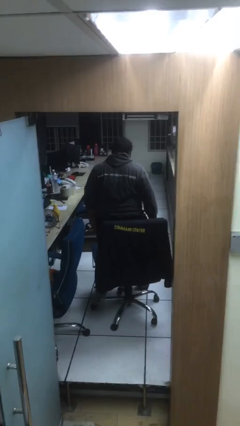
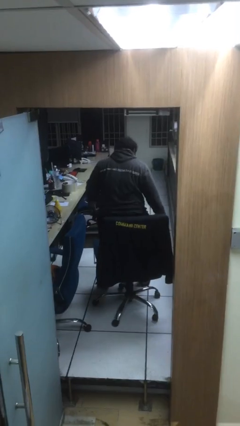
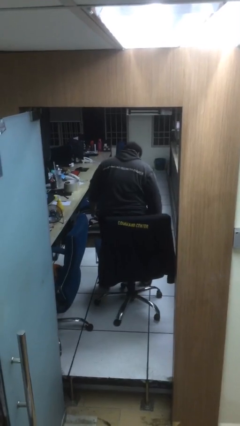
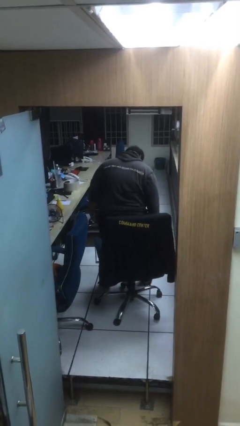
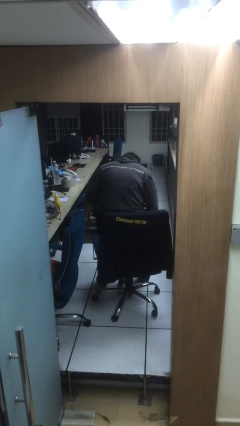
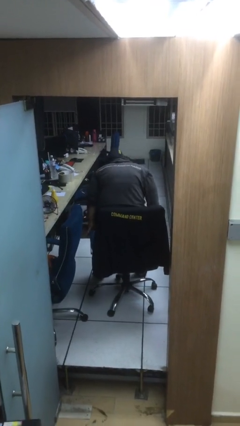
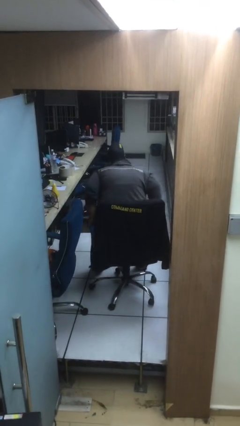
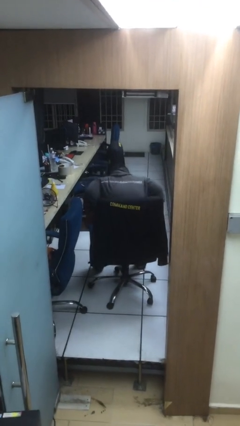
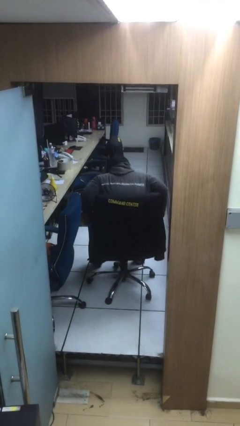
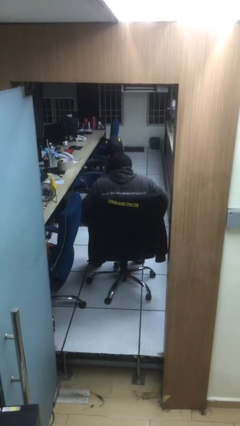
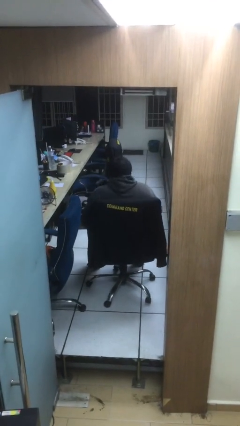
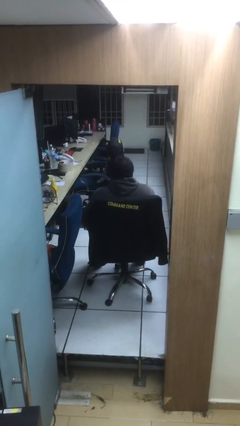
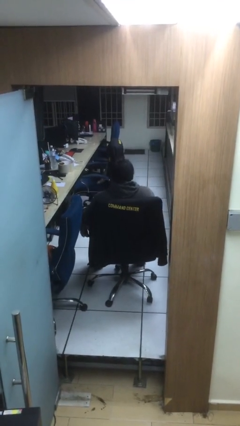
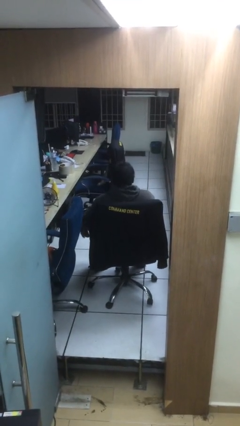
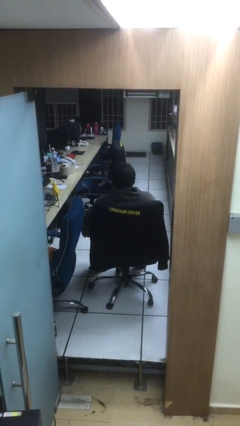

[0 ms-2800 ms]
person sits down

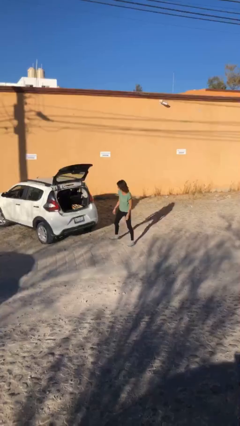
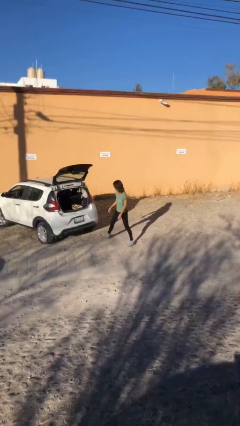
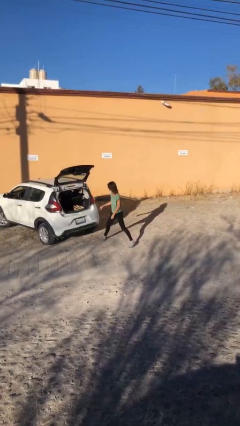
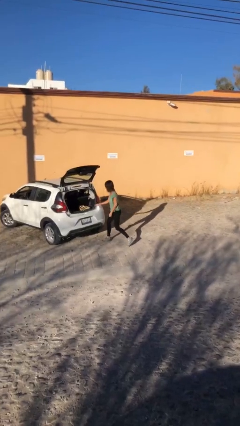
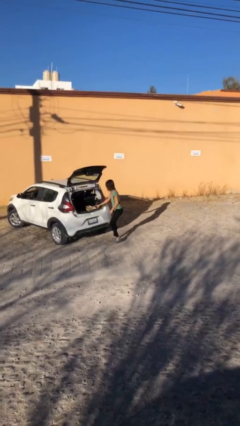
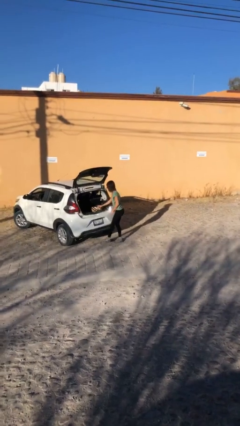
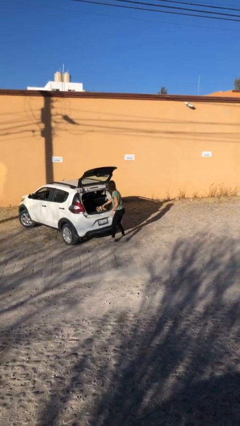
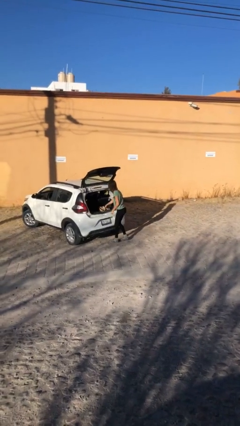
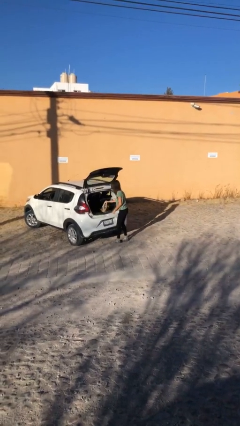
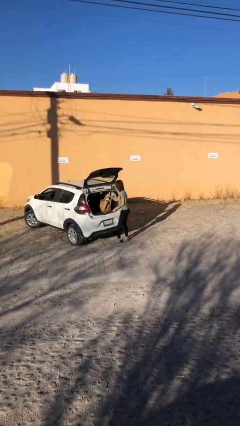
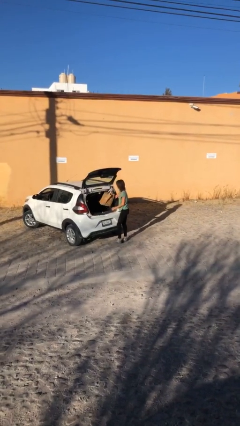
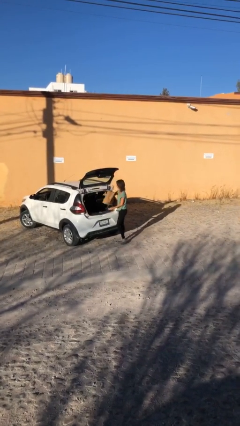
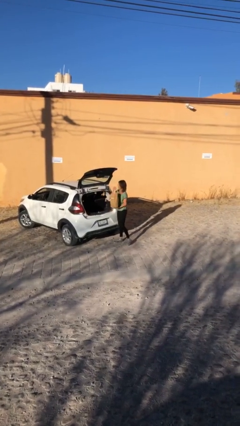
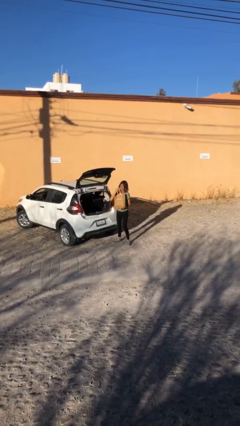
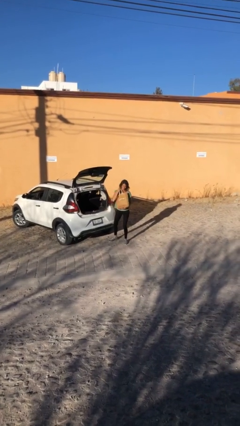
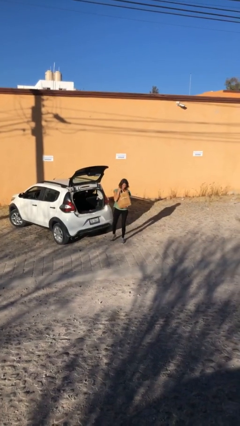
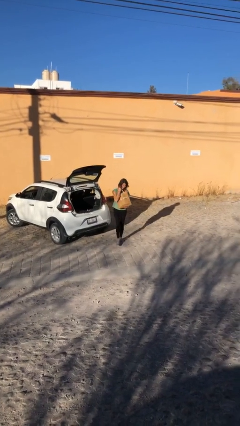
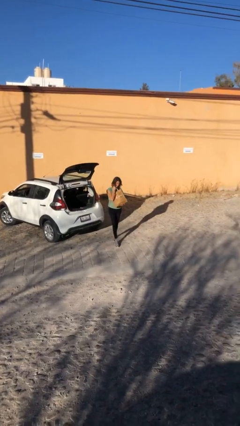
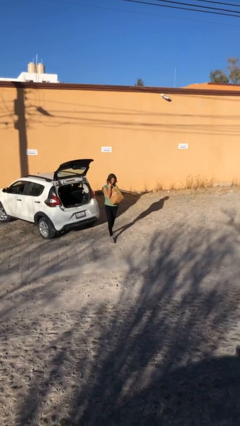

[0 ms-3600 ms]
person unloads car

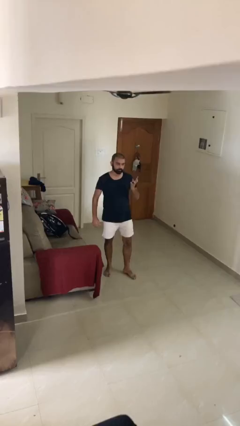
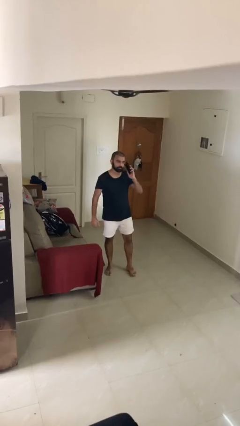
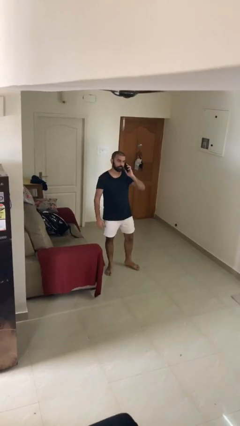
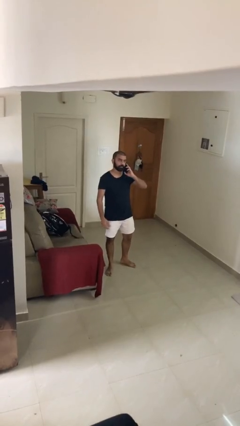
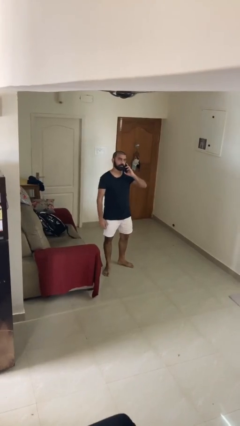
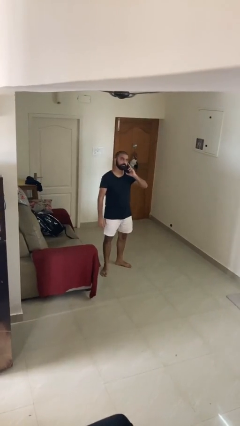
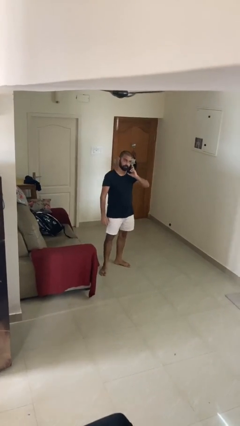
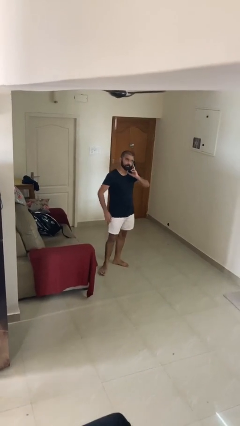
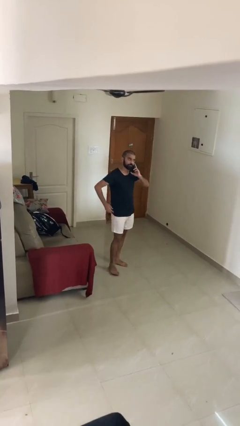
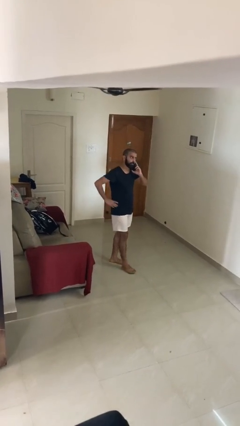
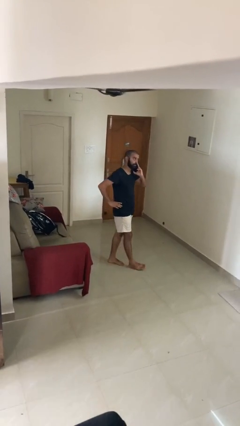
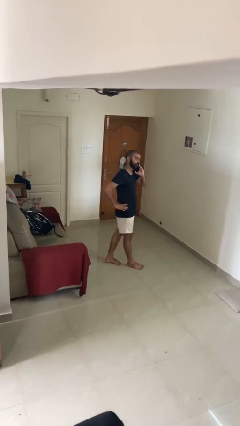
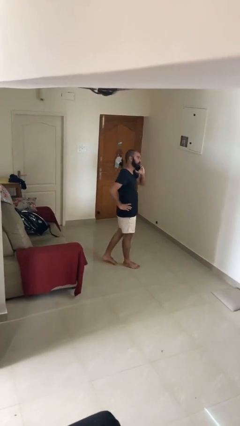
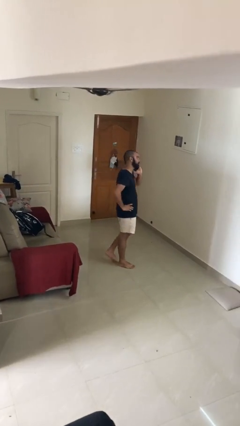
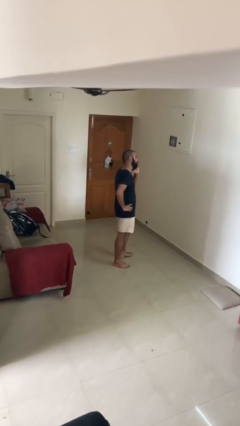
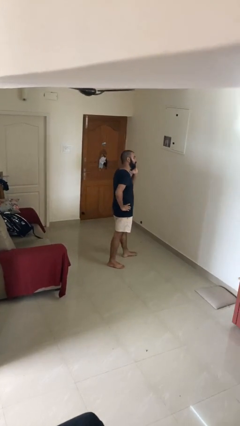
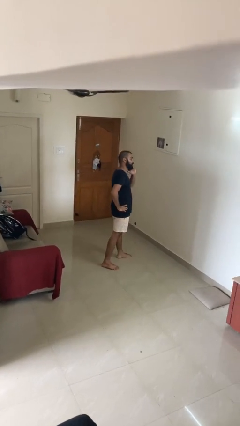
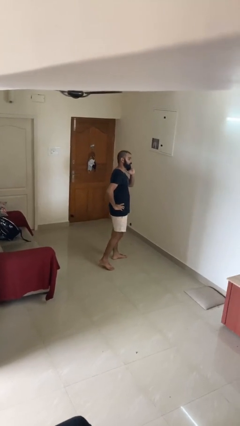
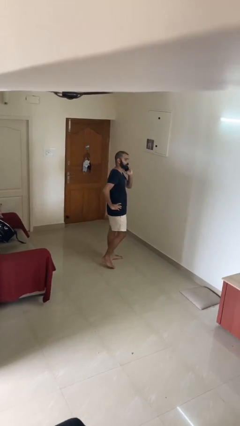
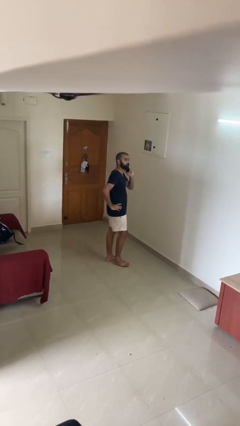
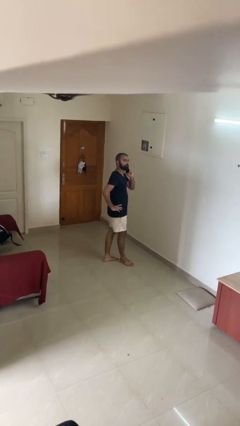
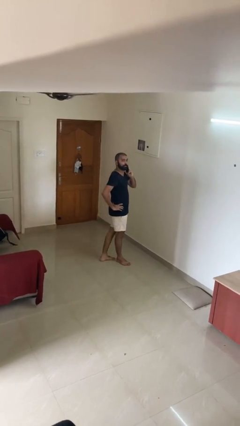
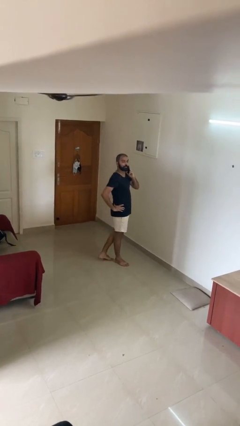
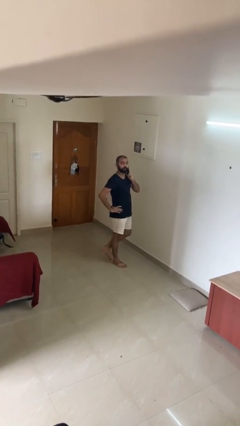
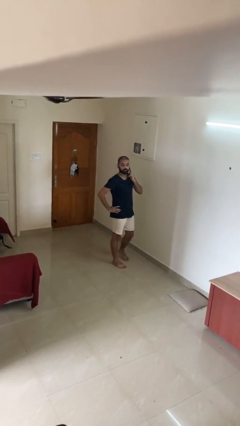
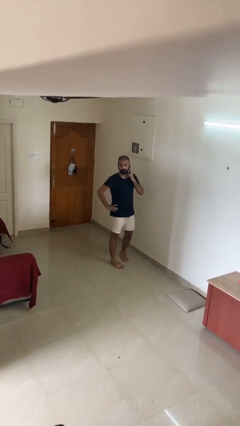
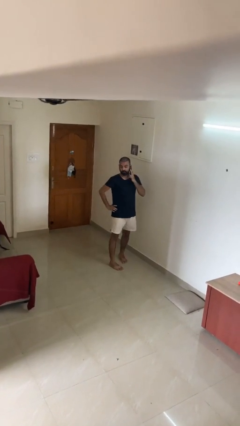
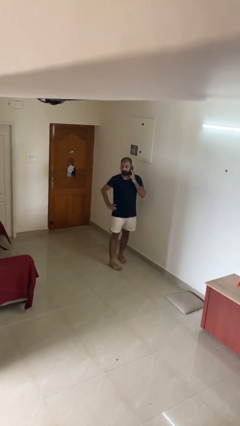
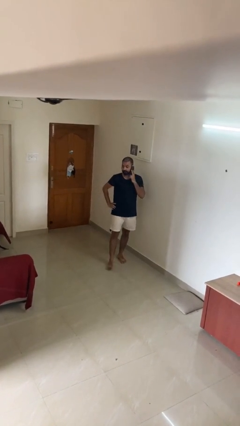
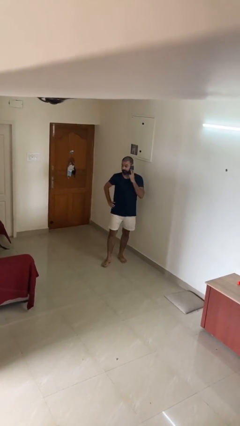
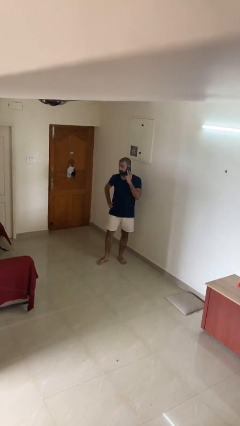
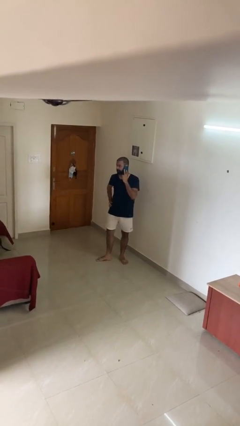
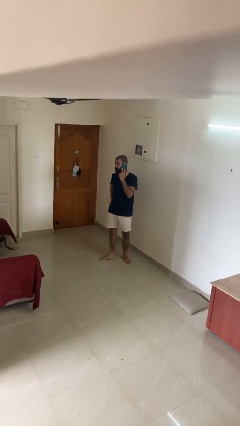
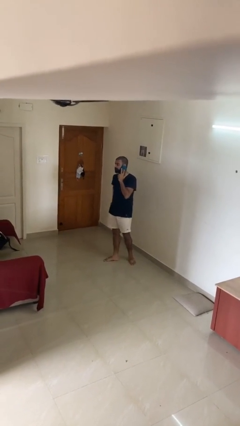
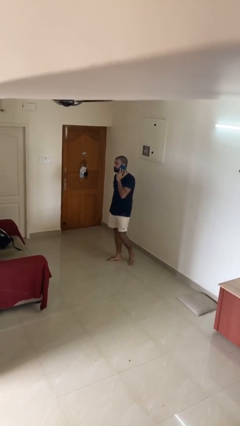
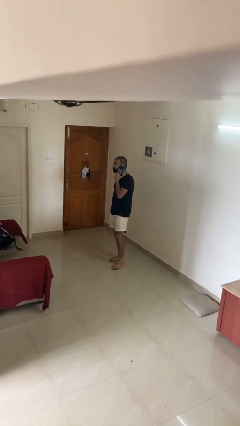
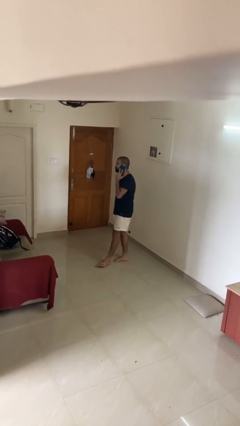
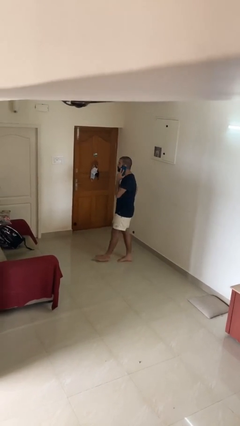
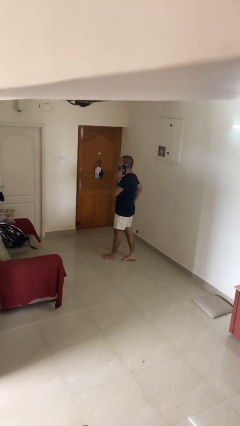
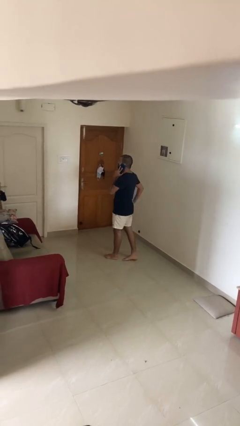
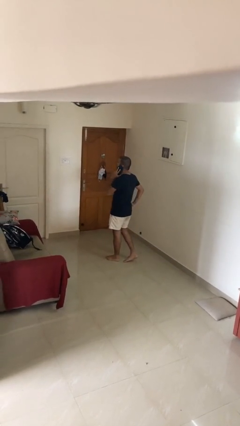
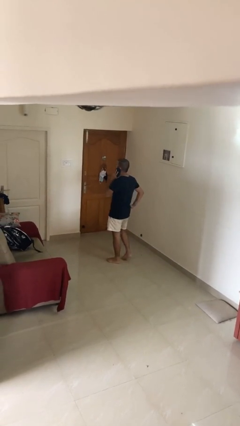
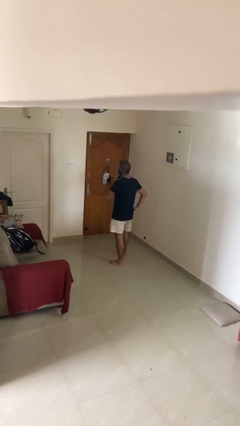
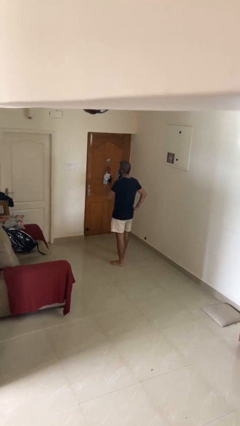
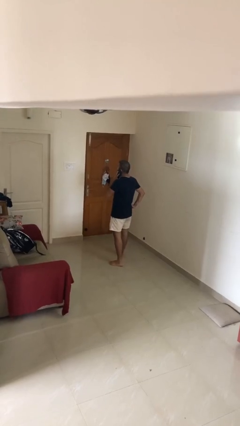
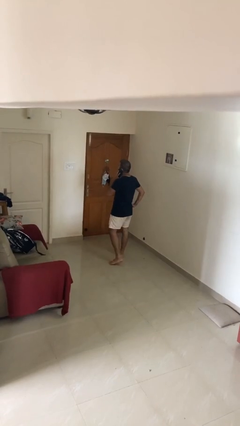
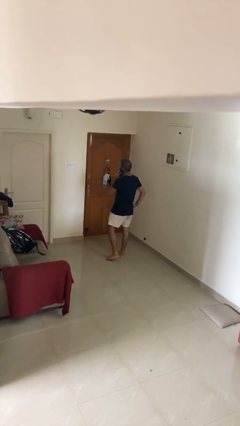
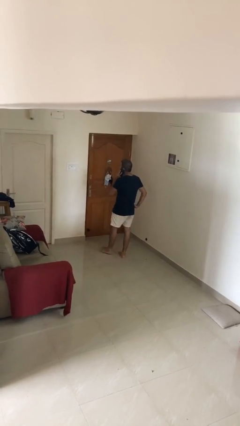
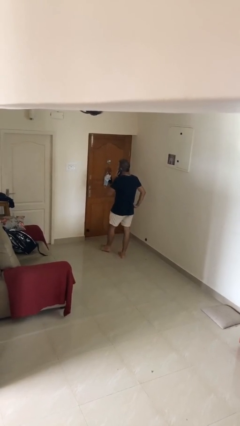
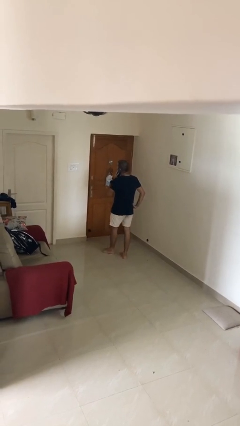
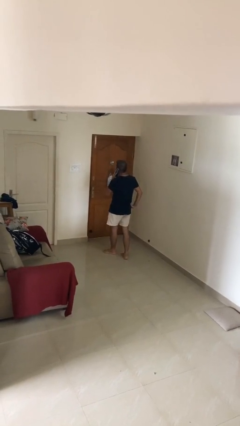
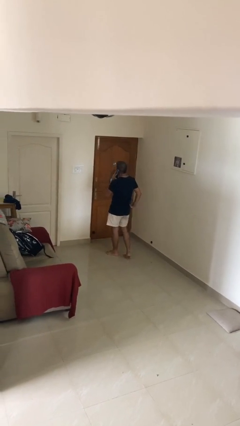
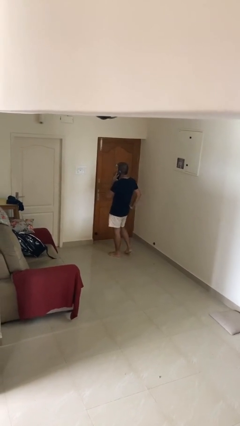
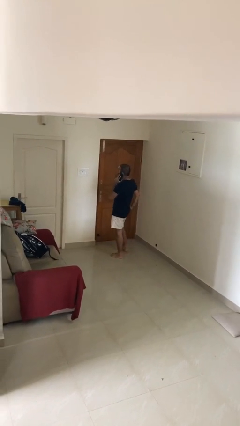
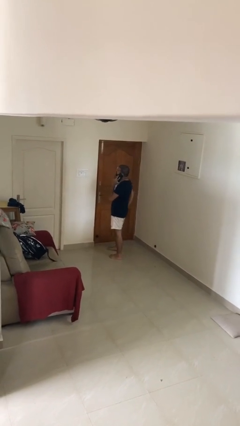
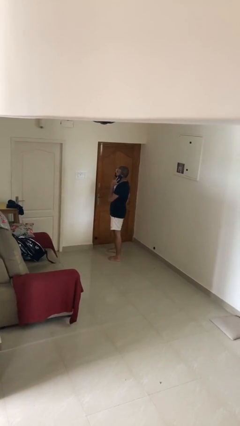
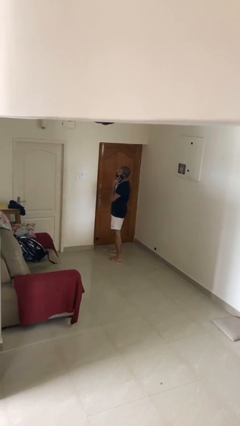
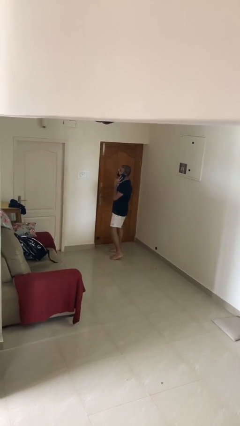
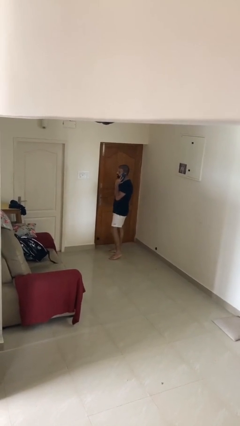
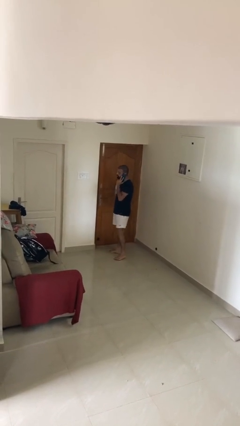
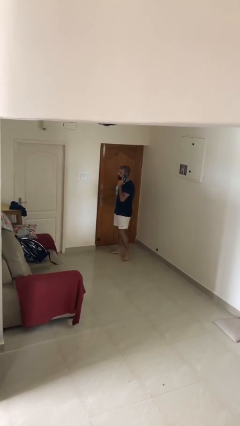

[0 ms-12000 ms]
person talks on phone

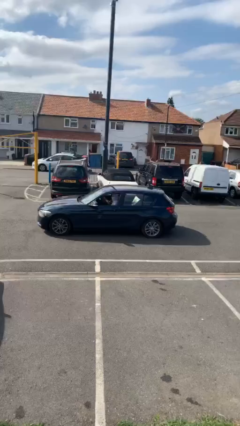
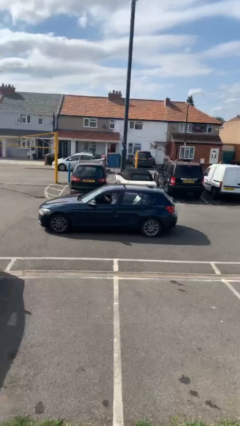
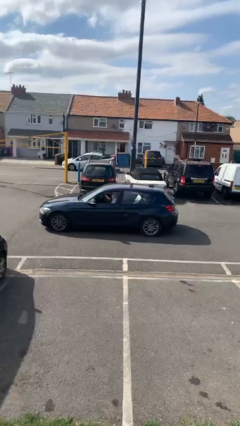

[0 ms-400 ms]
car picks up person
